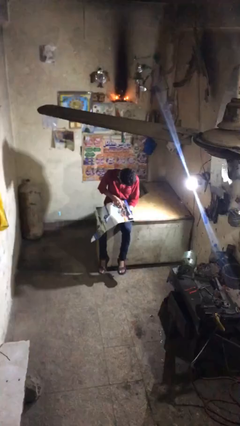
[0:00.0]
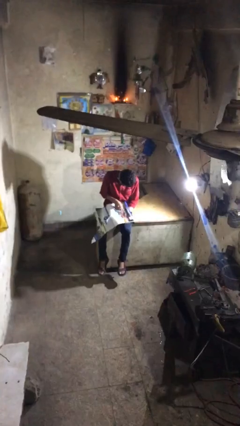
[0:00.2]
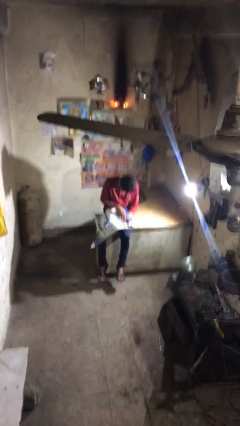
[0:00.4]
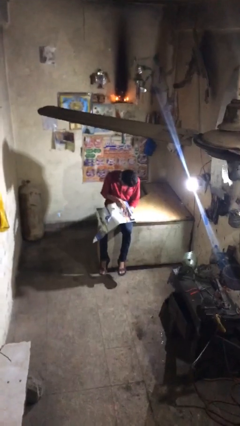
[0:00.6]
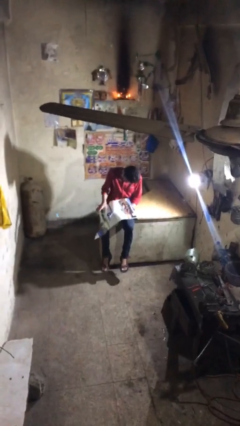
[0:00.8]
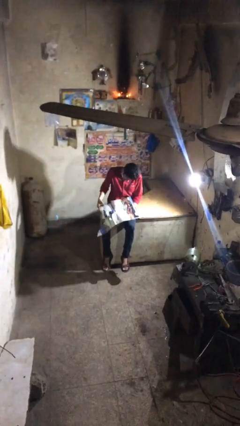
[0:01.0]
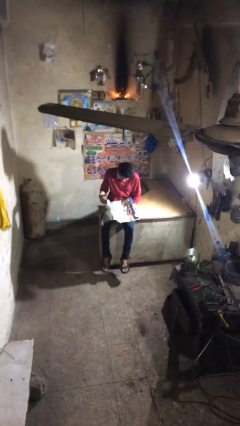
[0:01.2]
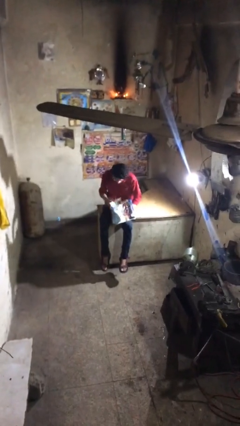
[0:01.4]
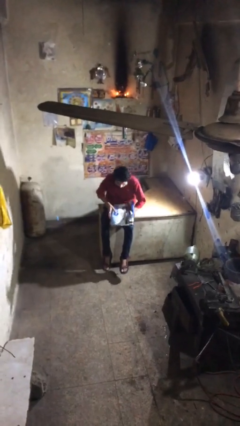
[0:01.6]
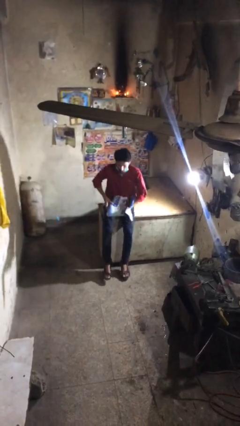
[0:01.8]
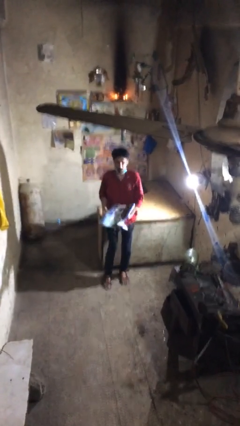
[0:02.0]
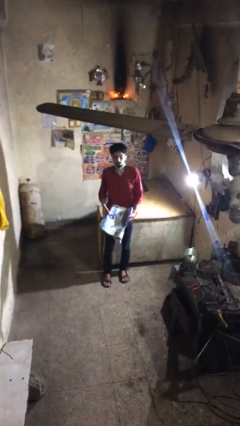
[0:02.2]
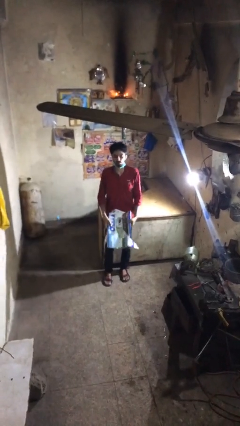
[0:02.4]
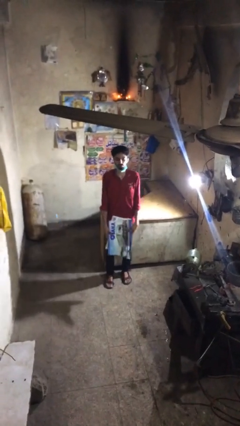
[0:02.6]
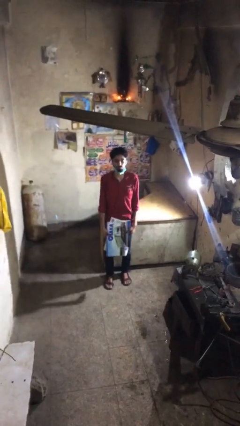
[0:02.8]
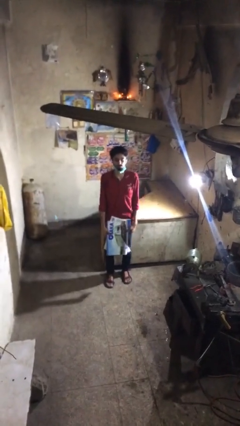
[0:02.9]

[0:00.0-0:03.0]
person stands up

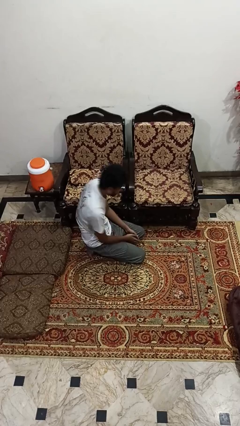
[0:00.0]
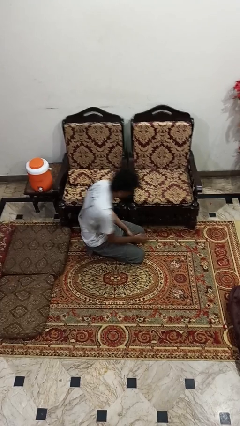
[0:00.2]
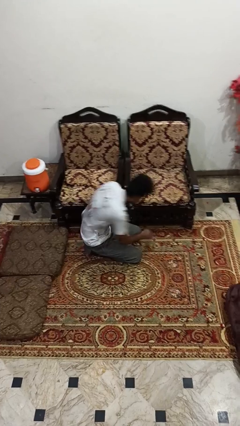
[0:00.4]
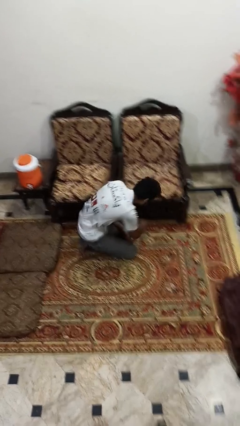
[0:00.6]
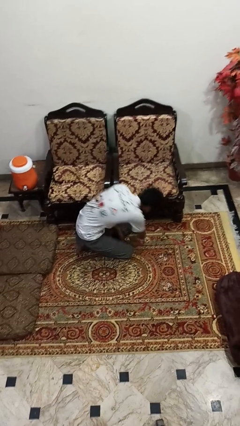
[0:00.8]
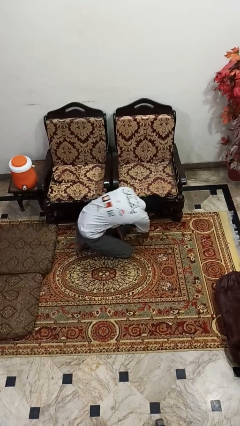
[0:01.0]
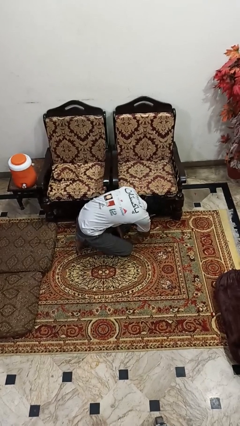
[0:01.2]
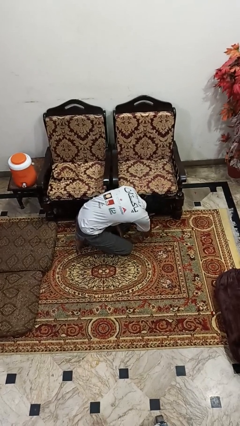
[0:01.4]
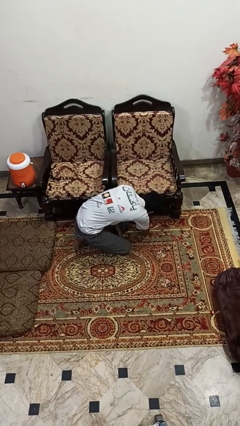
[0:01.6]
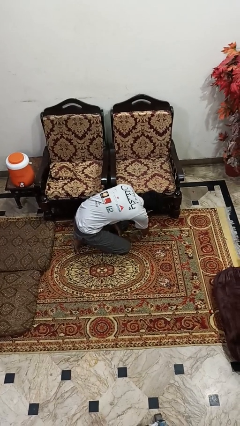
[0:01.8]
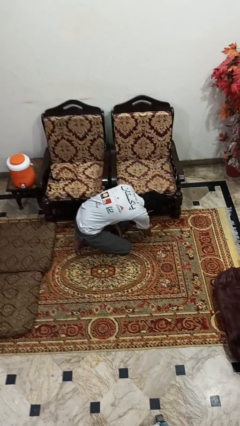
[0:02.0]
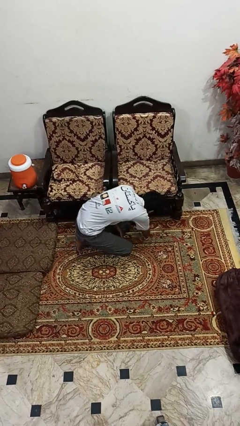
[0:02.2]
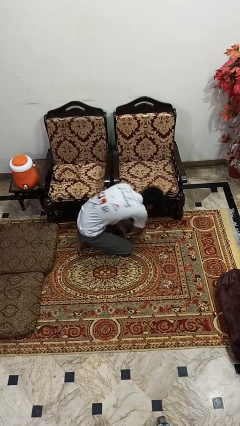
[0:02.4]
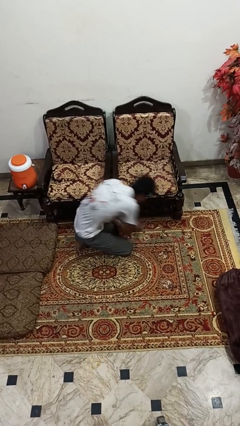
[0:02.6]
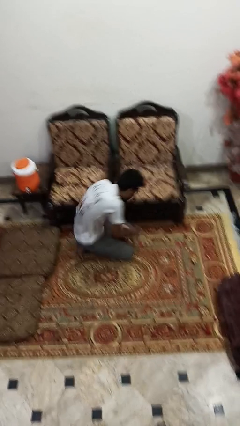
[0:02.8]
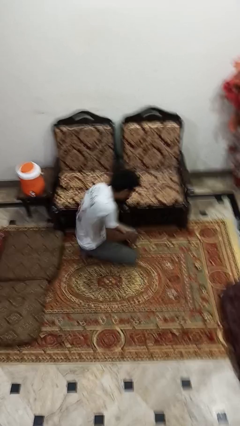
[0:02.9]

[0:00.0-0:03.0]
person searches under couch

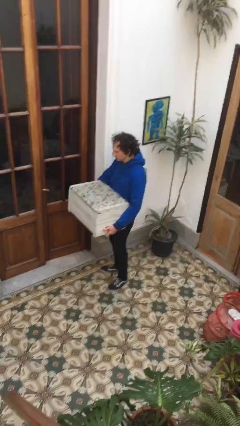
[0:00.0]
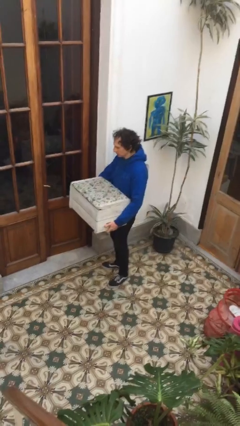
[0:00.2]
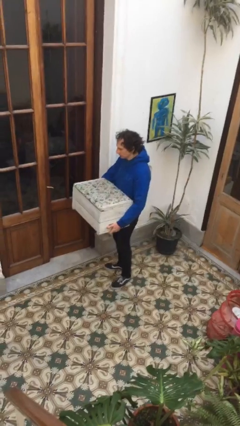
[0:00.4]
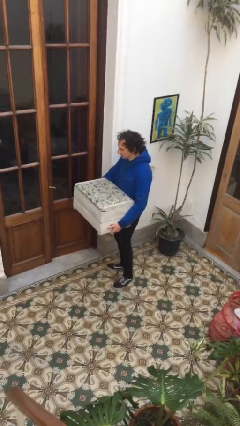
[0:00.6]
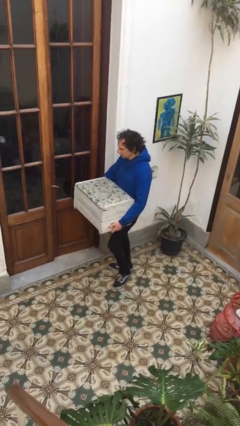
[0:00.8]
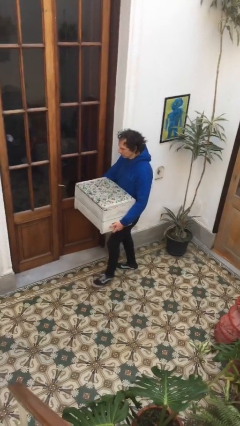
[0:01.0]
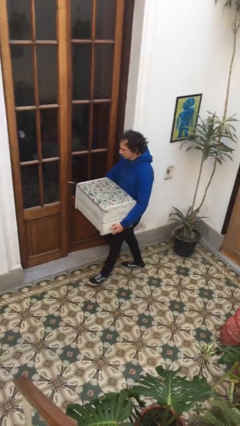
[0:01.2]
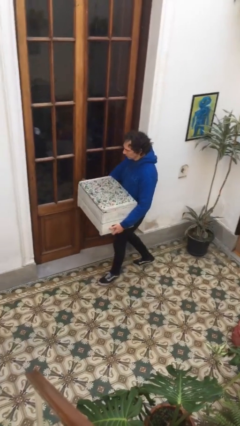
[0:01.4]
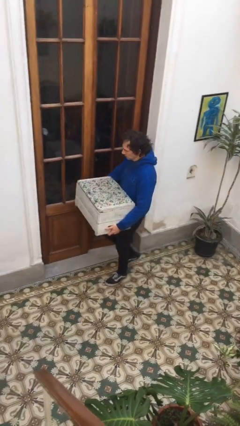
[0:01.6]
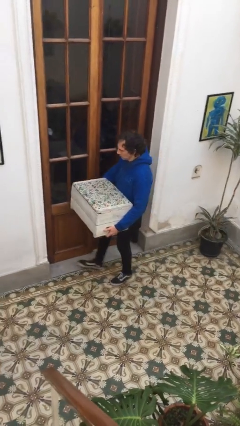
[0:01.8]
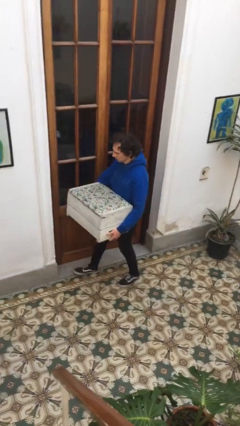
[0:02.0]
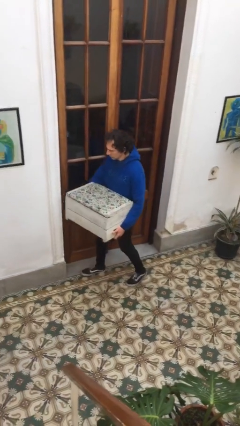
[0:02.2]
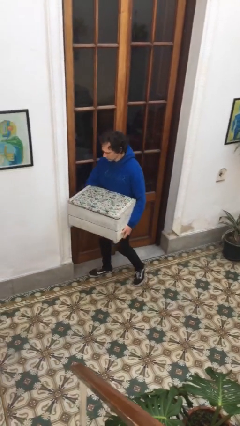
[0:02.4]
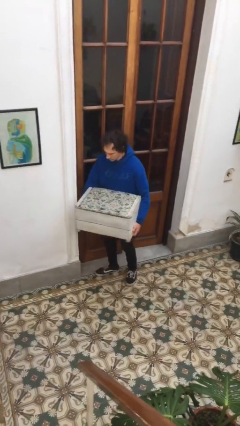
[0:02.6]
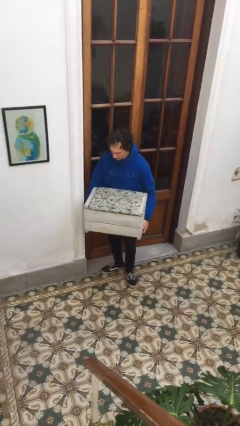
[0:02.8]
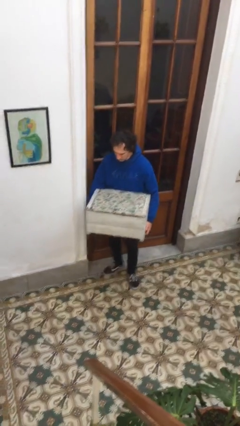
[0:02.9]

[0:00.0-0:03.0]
person carries furniture

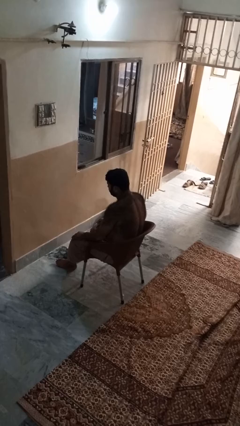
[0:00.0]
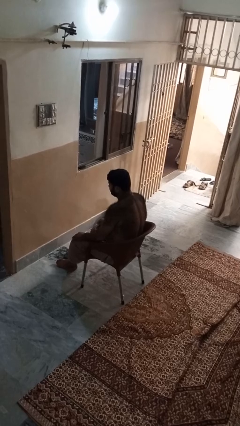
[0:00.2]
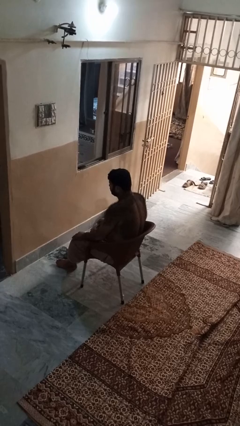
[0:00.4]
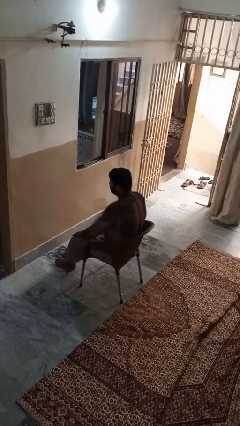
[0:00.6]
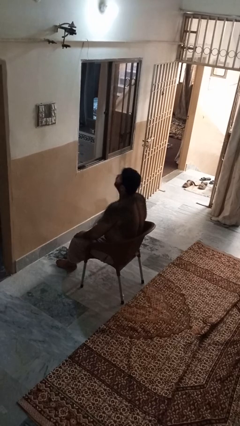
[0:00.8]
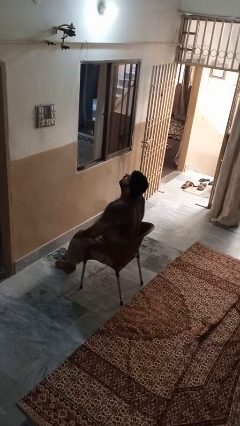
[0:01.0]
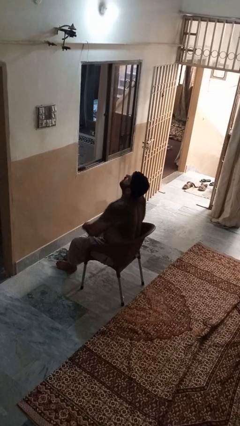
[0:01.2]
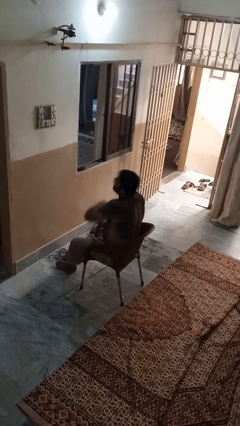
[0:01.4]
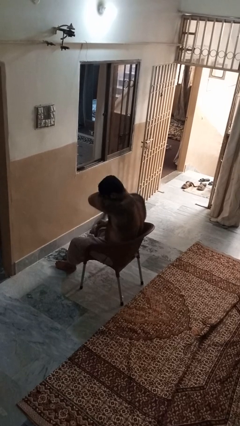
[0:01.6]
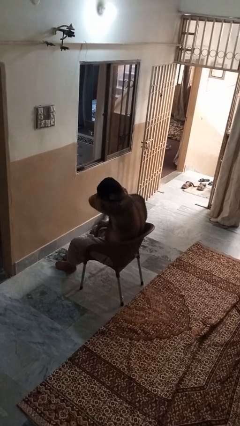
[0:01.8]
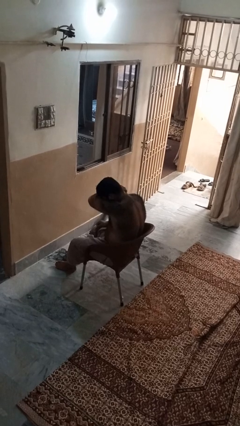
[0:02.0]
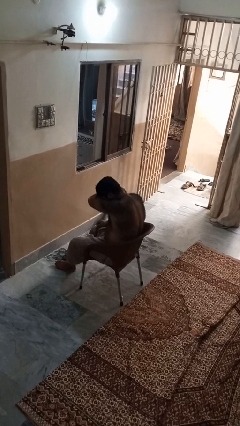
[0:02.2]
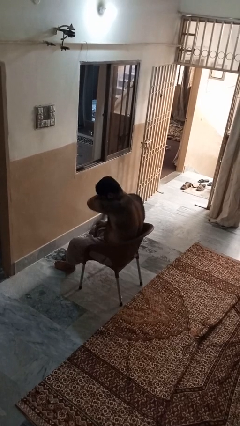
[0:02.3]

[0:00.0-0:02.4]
person sneezes into arm

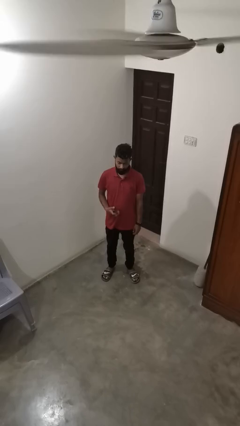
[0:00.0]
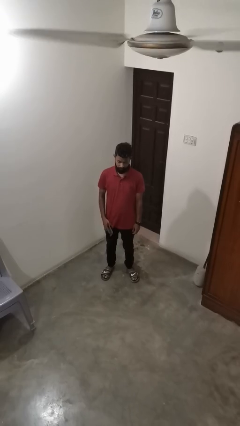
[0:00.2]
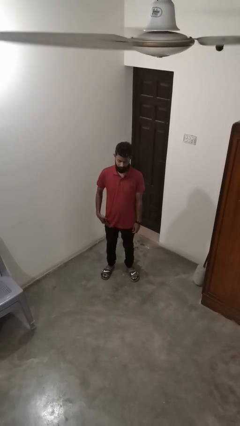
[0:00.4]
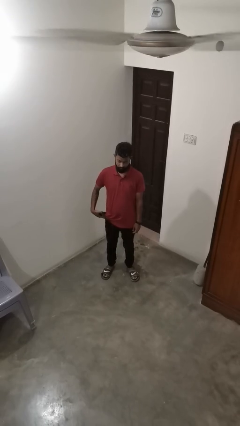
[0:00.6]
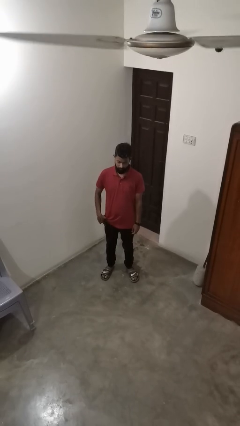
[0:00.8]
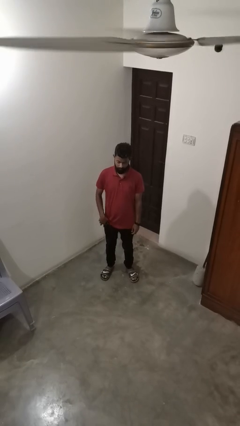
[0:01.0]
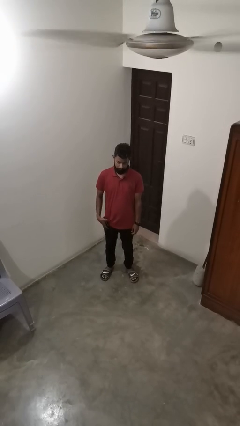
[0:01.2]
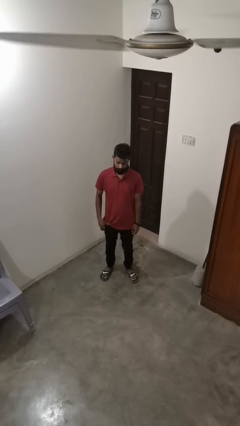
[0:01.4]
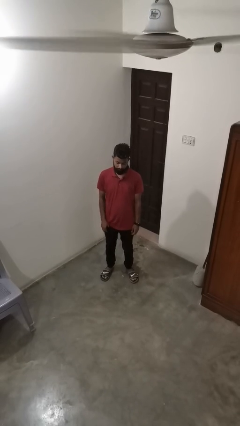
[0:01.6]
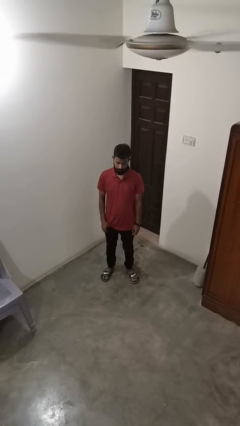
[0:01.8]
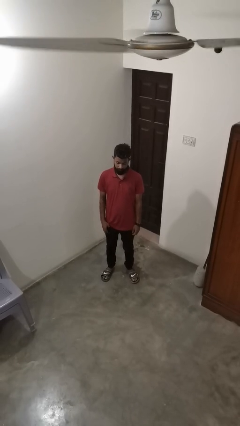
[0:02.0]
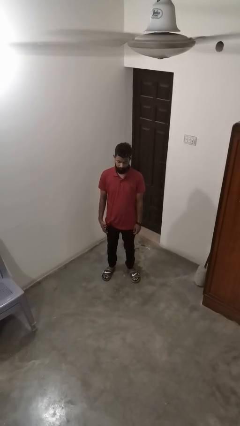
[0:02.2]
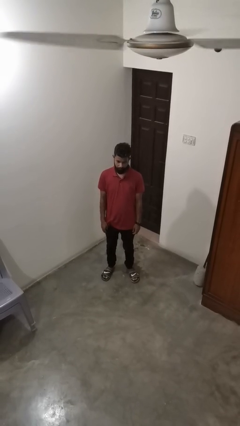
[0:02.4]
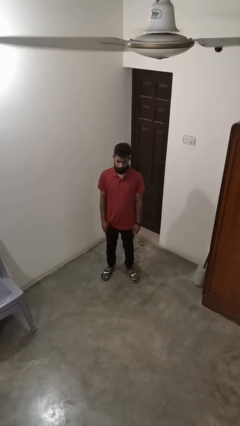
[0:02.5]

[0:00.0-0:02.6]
person puts phone into pocket

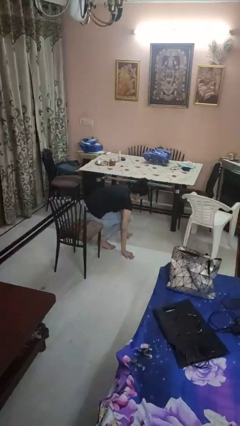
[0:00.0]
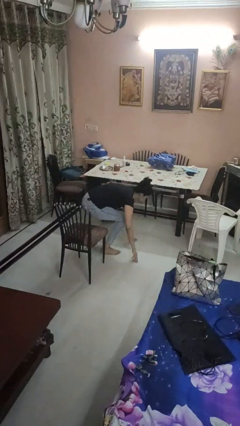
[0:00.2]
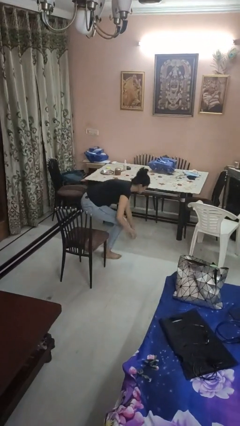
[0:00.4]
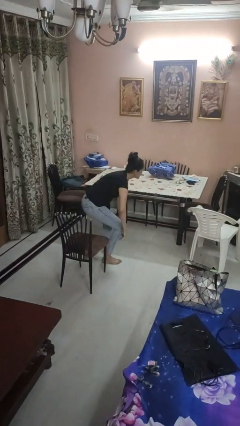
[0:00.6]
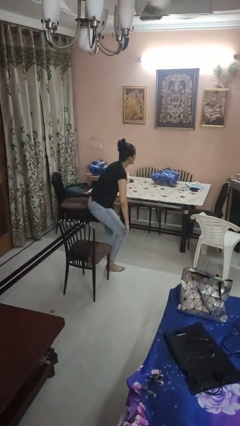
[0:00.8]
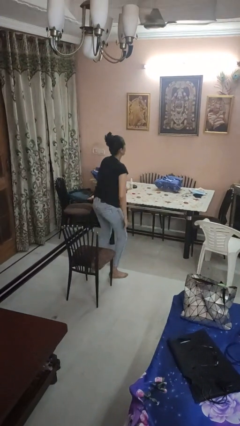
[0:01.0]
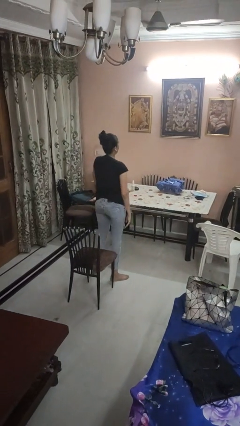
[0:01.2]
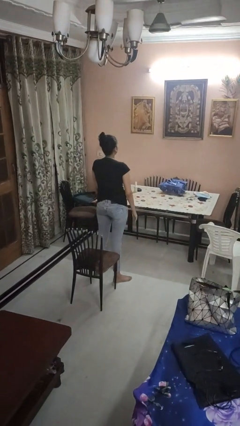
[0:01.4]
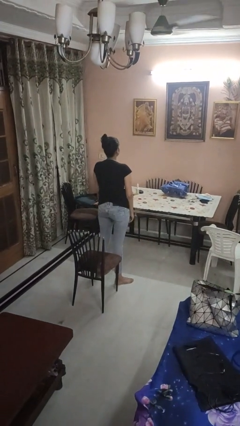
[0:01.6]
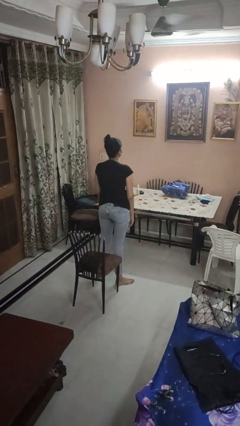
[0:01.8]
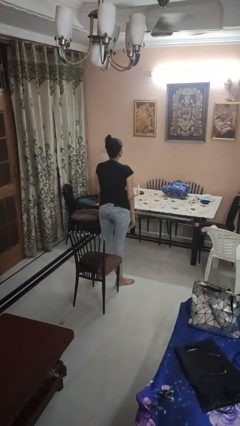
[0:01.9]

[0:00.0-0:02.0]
person stands up from floor

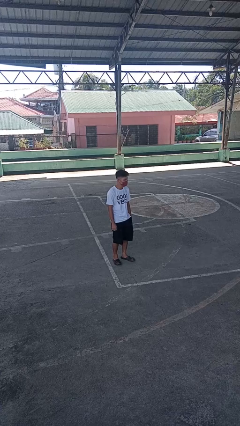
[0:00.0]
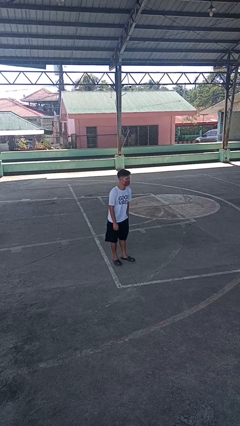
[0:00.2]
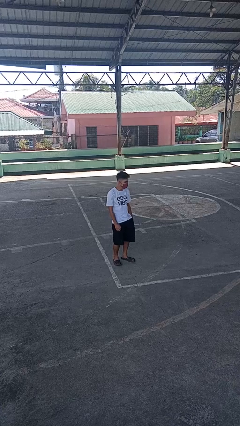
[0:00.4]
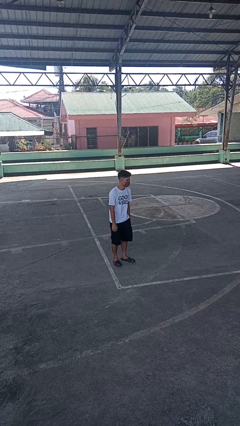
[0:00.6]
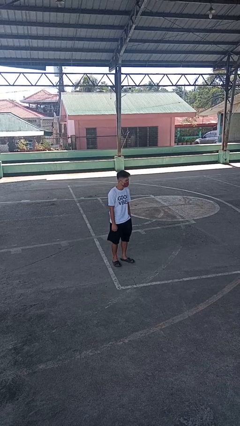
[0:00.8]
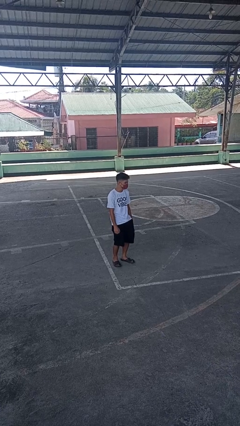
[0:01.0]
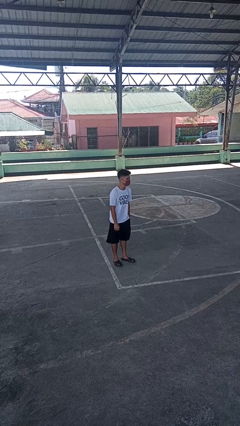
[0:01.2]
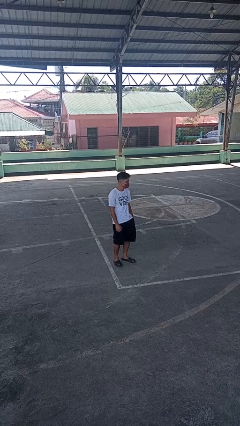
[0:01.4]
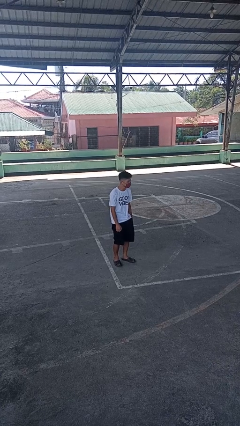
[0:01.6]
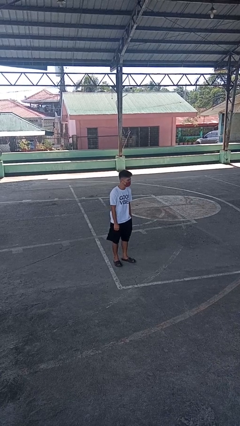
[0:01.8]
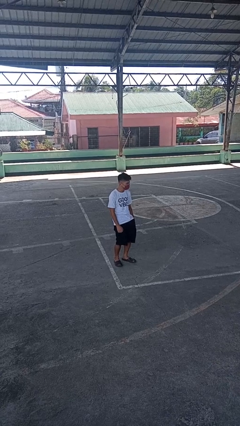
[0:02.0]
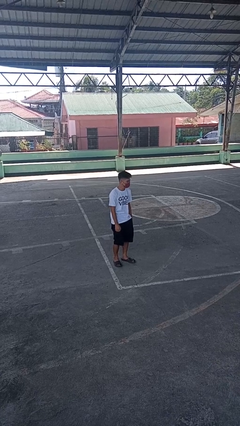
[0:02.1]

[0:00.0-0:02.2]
person wiggles hips
